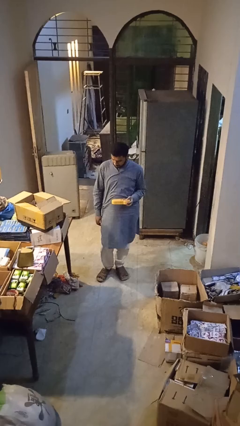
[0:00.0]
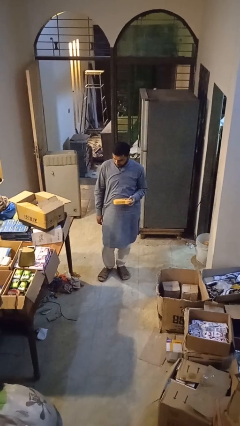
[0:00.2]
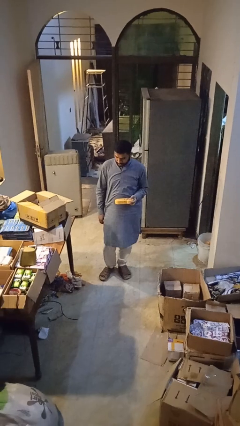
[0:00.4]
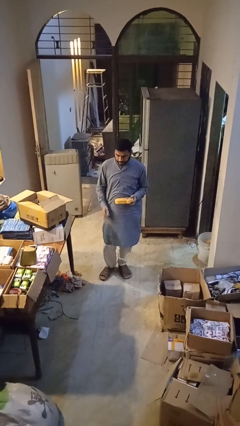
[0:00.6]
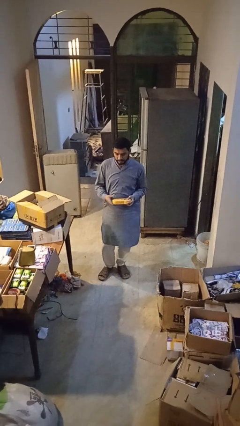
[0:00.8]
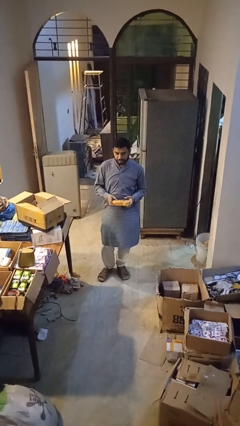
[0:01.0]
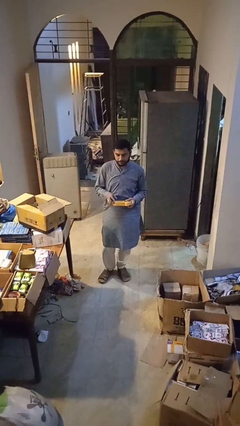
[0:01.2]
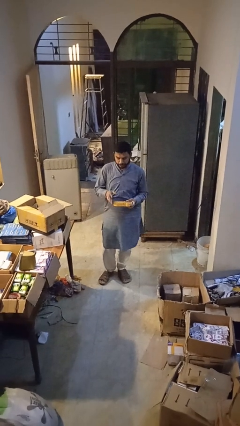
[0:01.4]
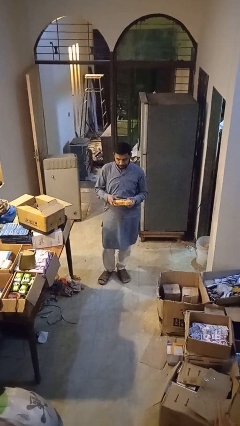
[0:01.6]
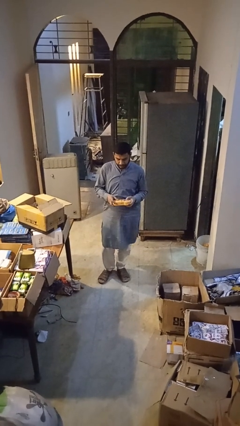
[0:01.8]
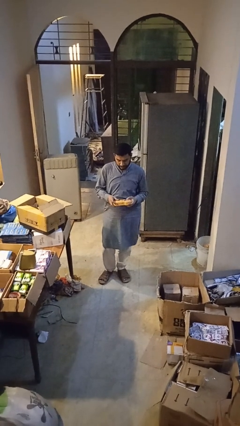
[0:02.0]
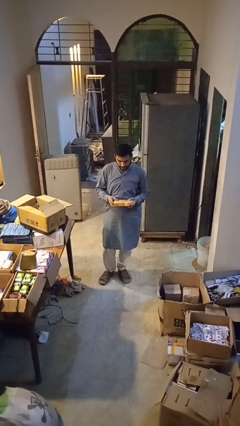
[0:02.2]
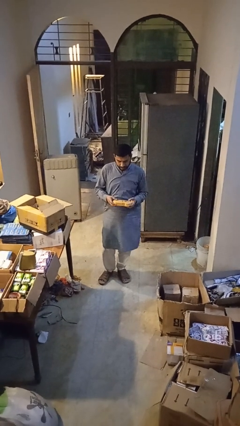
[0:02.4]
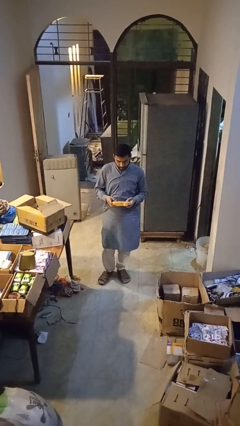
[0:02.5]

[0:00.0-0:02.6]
person interacts with handheld game

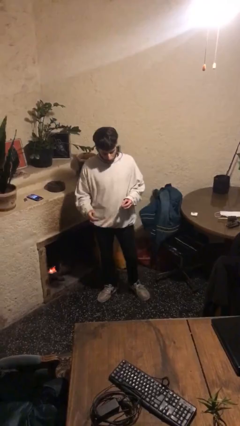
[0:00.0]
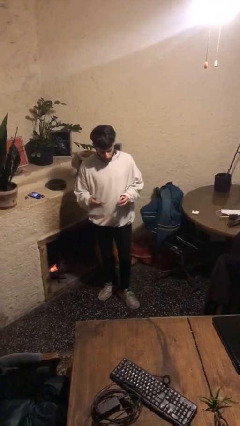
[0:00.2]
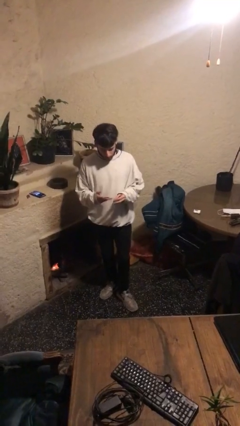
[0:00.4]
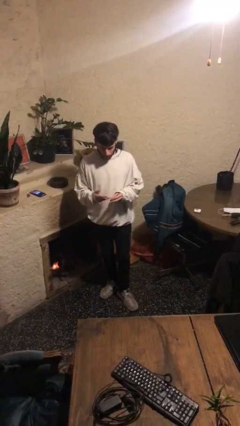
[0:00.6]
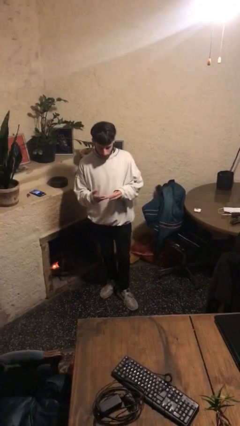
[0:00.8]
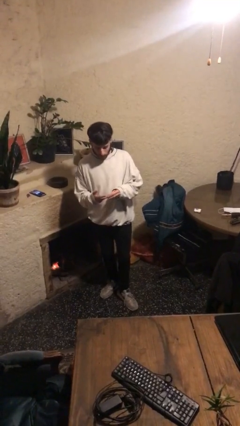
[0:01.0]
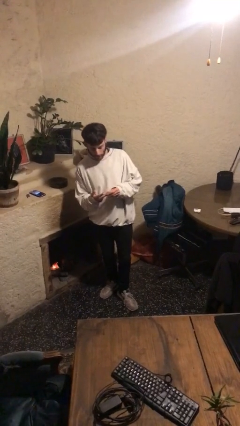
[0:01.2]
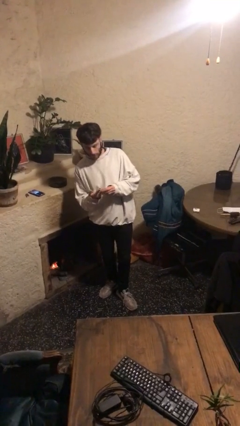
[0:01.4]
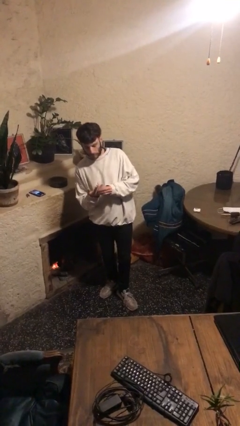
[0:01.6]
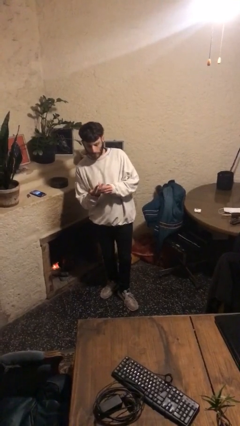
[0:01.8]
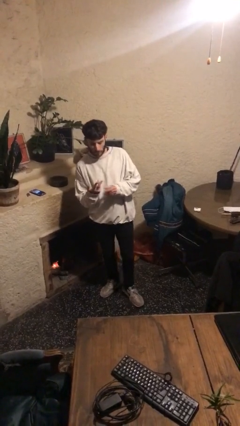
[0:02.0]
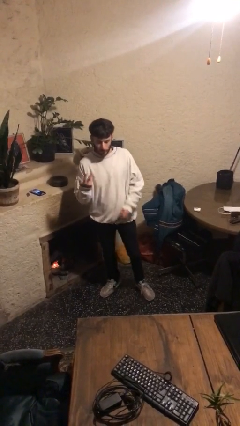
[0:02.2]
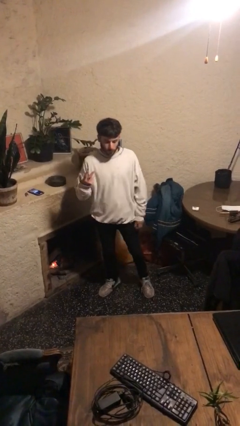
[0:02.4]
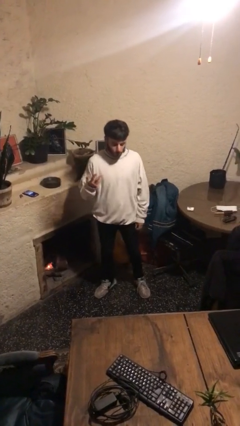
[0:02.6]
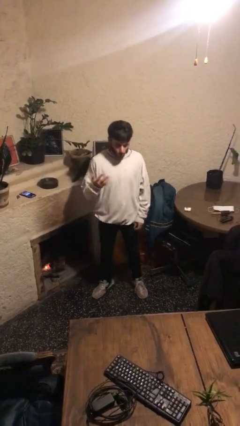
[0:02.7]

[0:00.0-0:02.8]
person puts on ring

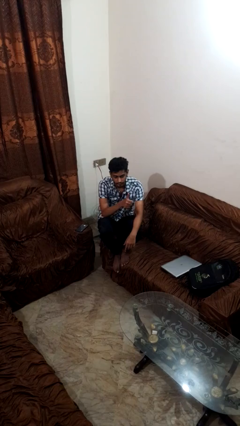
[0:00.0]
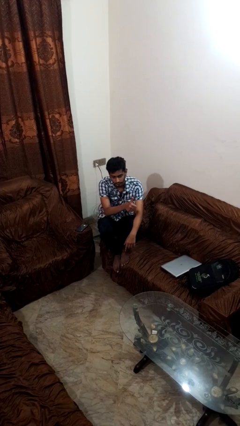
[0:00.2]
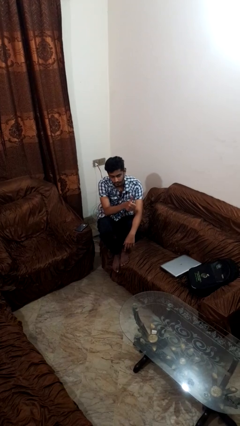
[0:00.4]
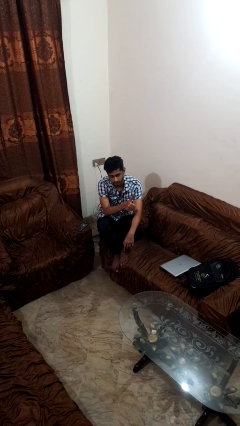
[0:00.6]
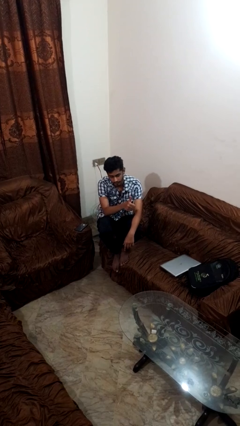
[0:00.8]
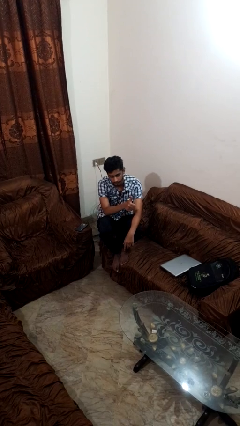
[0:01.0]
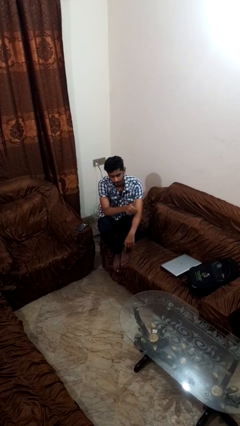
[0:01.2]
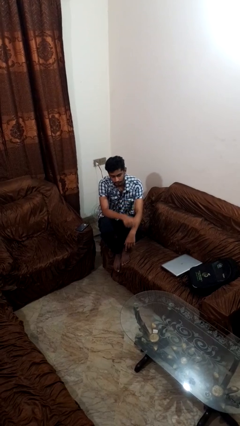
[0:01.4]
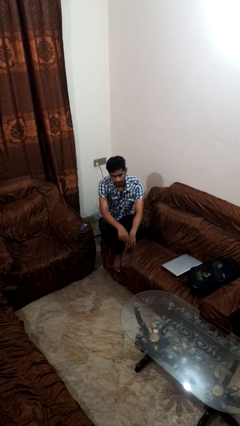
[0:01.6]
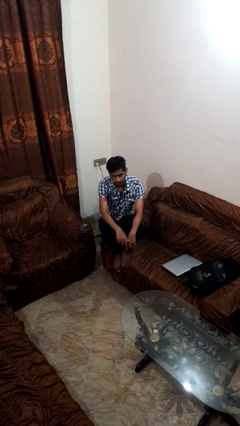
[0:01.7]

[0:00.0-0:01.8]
person gestures thumbs up

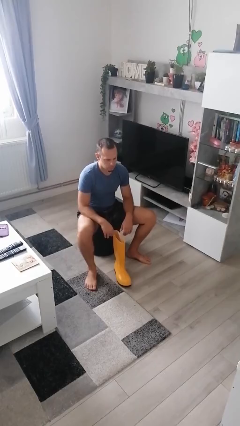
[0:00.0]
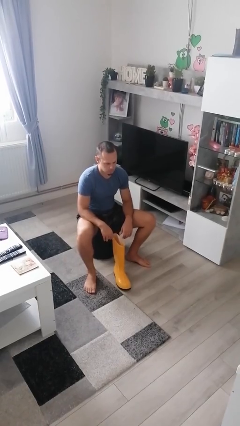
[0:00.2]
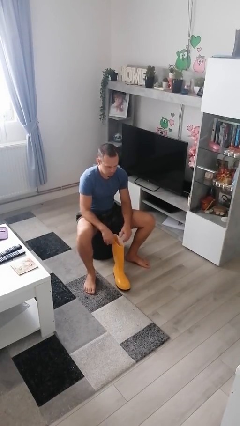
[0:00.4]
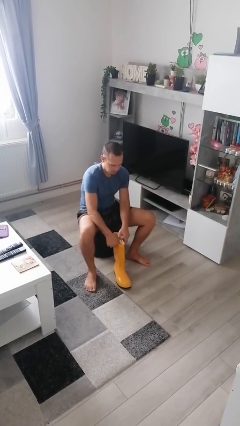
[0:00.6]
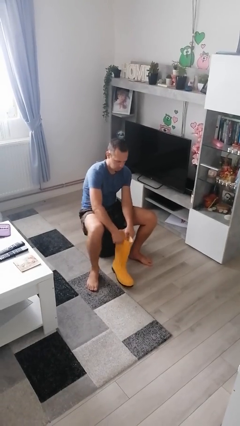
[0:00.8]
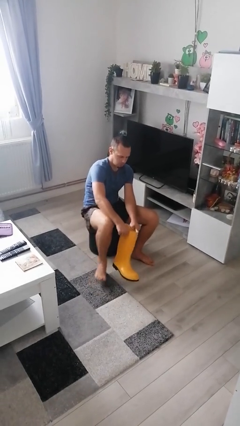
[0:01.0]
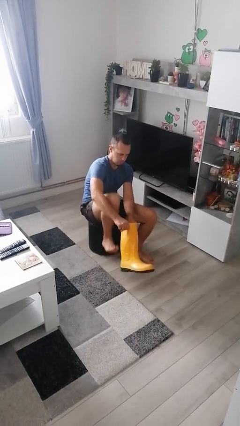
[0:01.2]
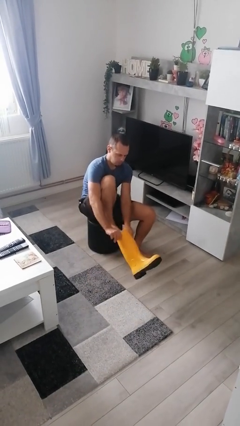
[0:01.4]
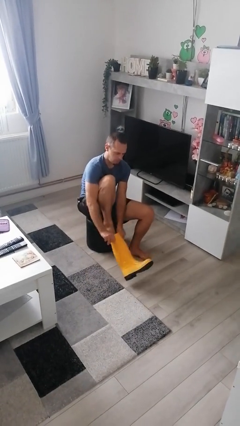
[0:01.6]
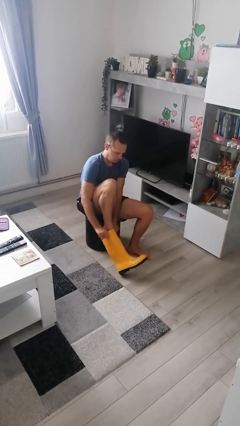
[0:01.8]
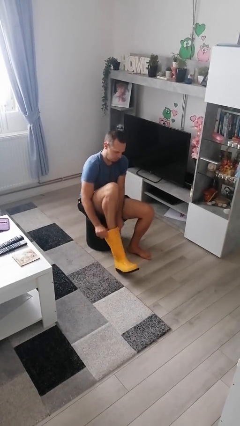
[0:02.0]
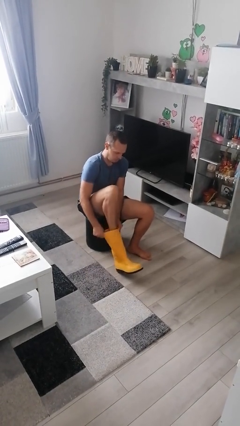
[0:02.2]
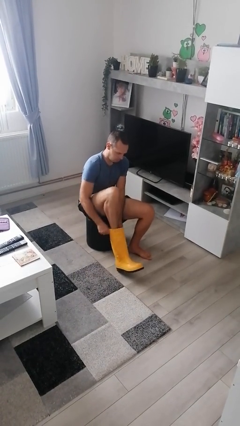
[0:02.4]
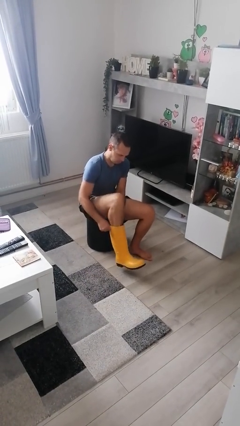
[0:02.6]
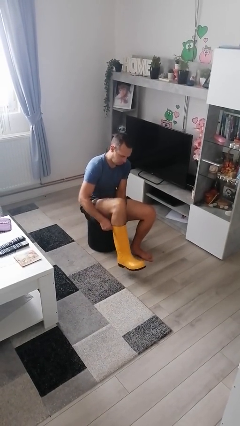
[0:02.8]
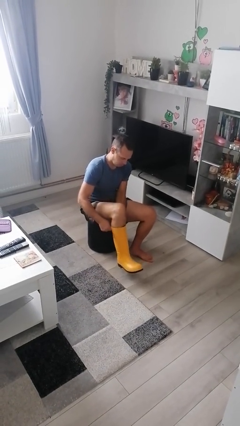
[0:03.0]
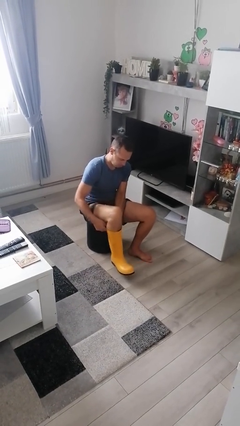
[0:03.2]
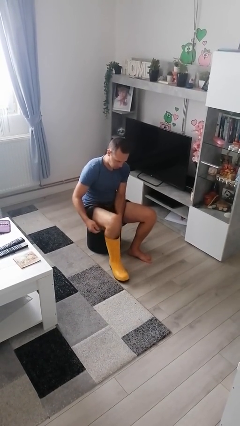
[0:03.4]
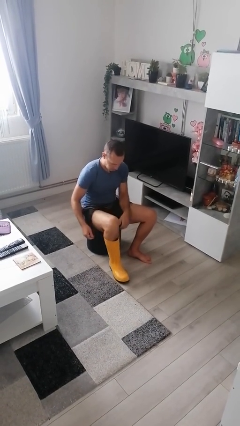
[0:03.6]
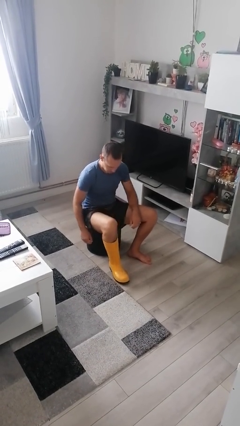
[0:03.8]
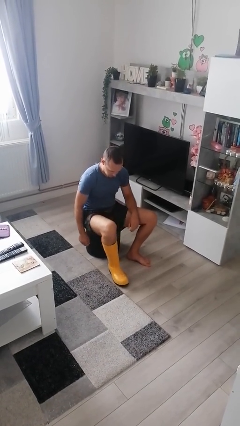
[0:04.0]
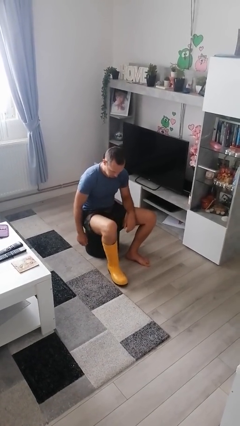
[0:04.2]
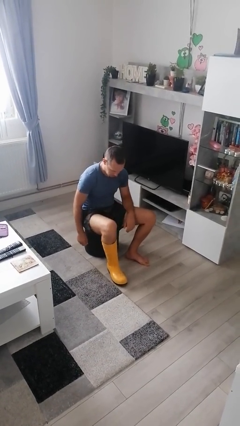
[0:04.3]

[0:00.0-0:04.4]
person puts on boots

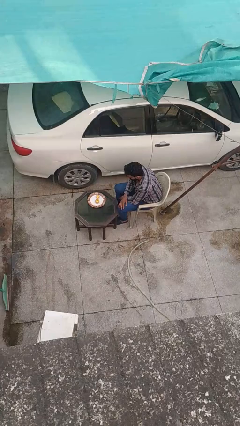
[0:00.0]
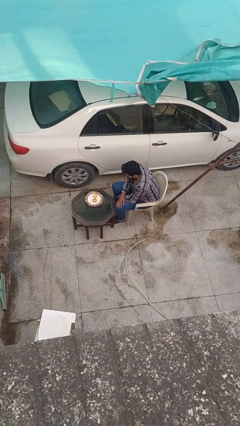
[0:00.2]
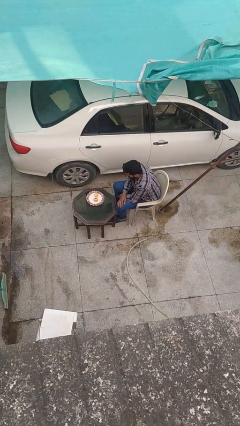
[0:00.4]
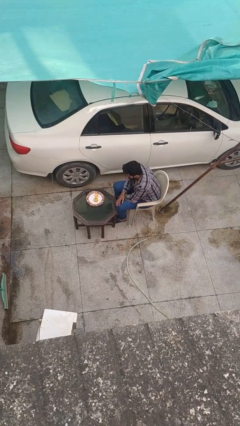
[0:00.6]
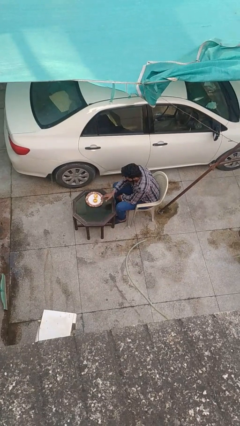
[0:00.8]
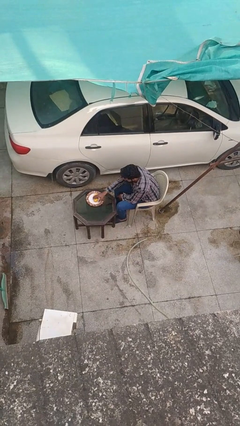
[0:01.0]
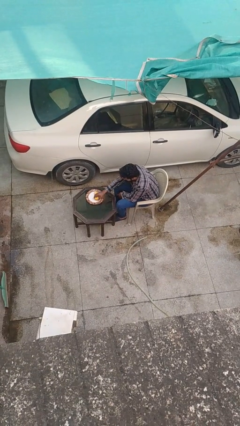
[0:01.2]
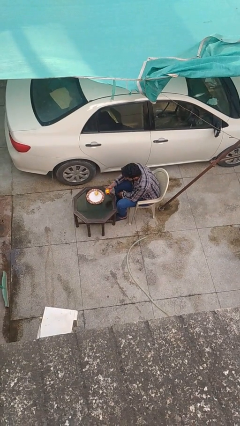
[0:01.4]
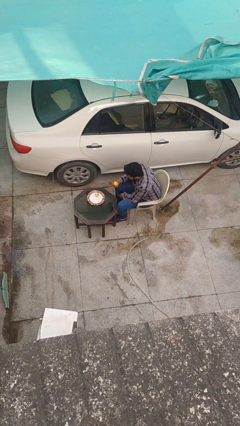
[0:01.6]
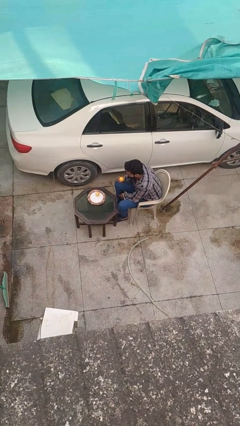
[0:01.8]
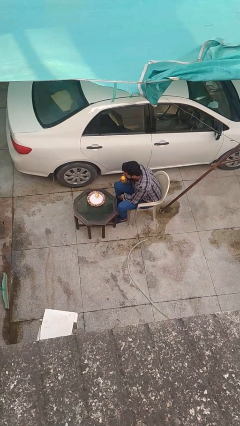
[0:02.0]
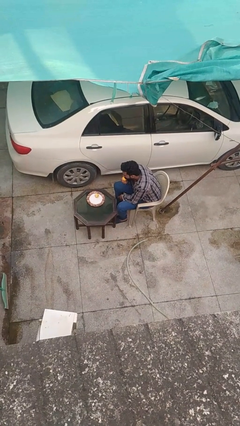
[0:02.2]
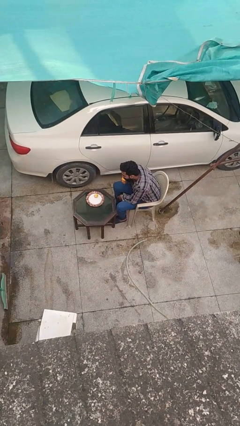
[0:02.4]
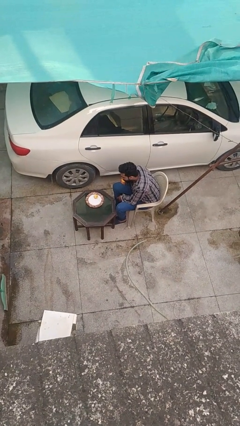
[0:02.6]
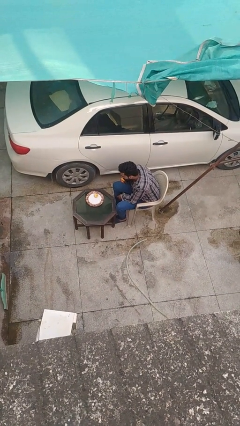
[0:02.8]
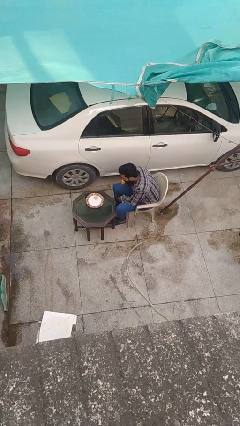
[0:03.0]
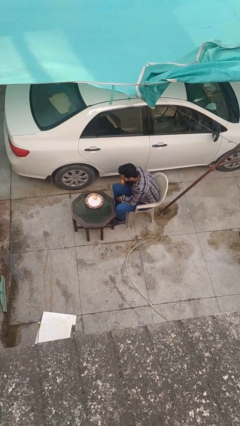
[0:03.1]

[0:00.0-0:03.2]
person eats with hands

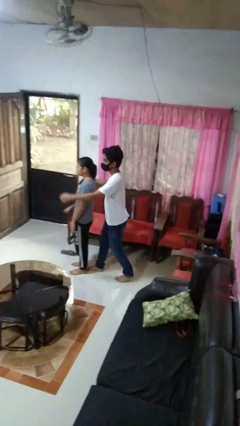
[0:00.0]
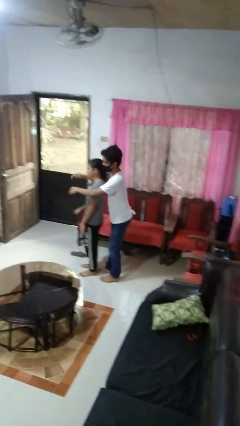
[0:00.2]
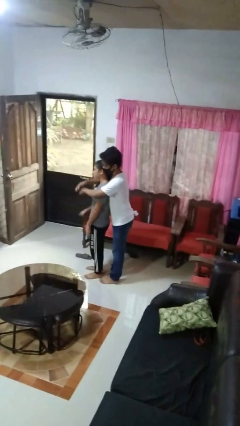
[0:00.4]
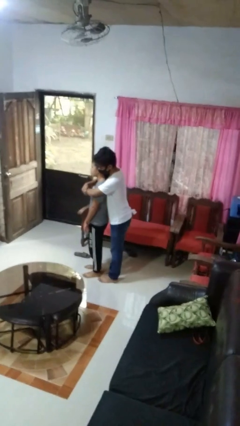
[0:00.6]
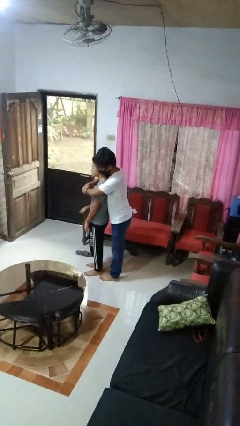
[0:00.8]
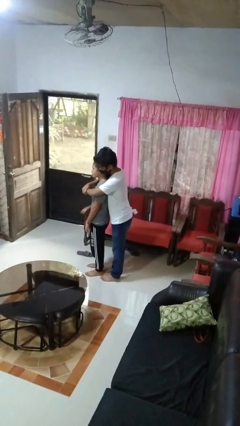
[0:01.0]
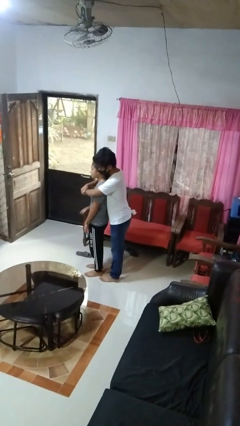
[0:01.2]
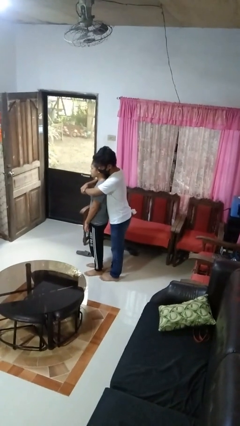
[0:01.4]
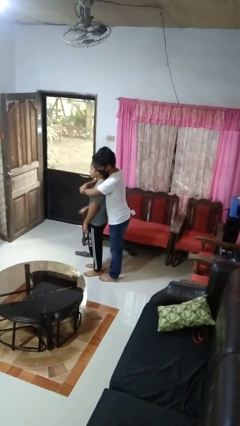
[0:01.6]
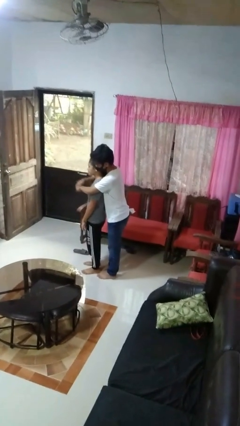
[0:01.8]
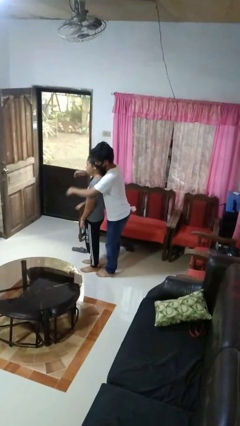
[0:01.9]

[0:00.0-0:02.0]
person hugs person from behind

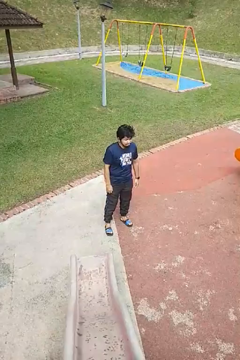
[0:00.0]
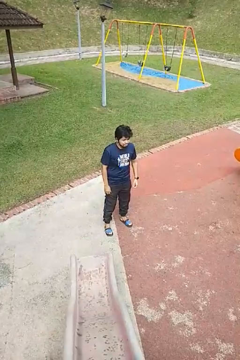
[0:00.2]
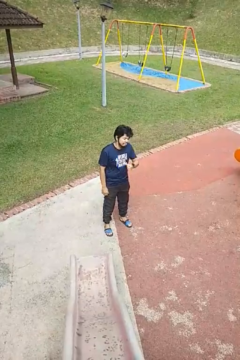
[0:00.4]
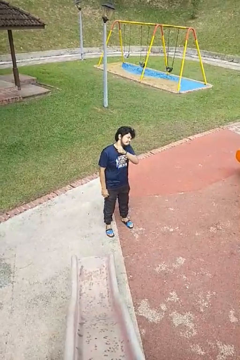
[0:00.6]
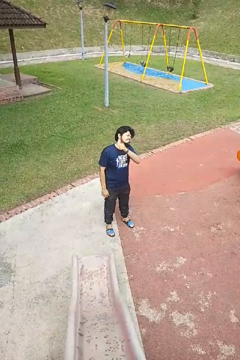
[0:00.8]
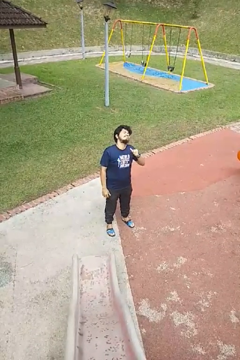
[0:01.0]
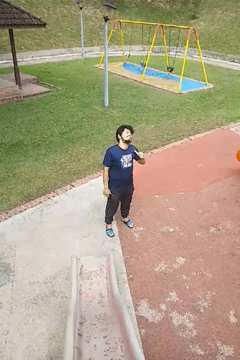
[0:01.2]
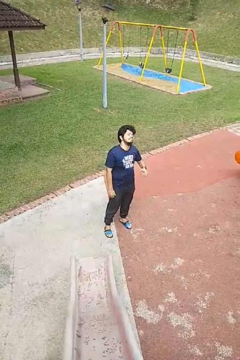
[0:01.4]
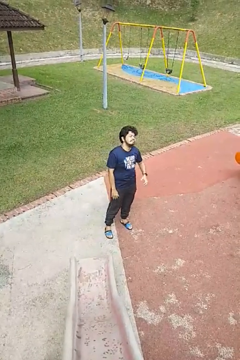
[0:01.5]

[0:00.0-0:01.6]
person gestures cut
